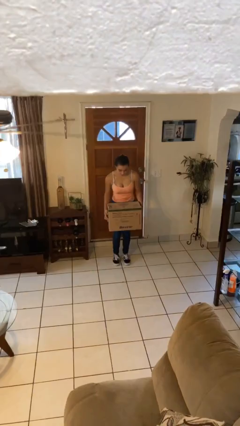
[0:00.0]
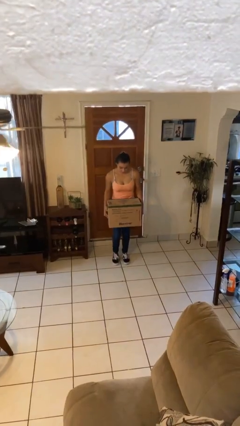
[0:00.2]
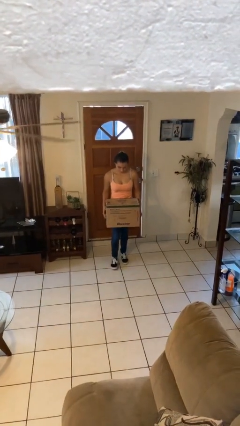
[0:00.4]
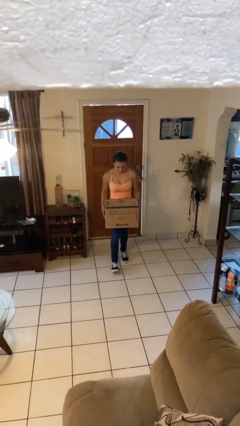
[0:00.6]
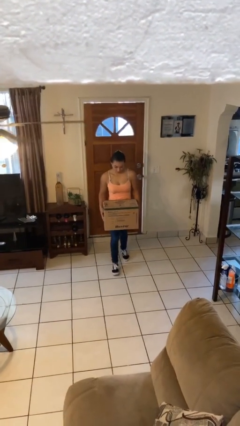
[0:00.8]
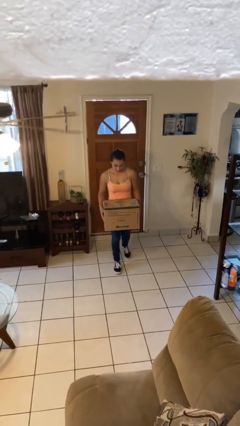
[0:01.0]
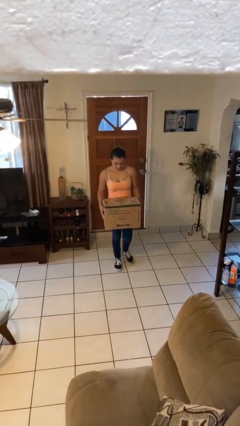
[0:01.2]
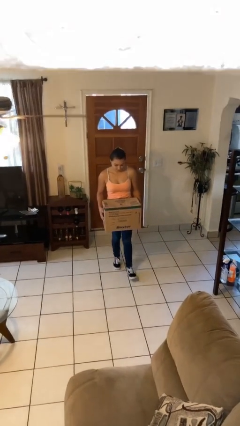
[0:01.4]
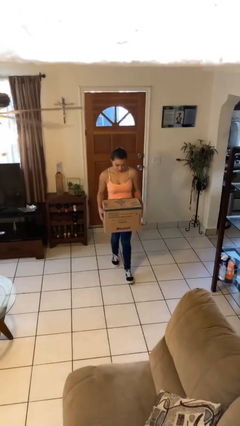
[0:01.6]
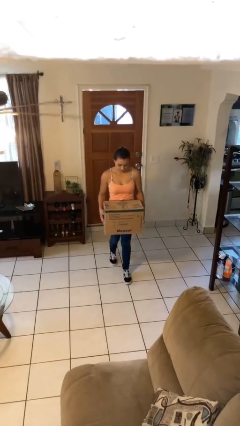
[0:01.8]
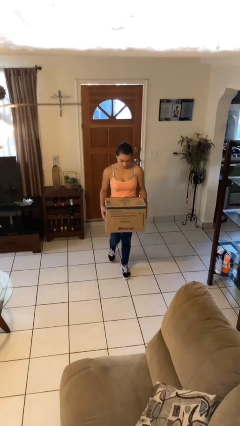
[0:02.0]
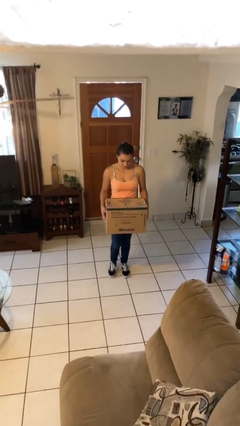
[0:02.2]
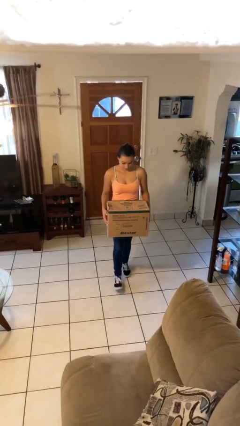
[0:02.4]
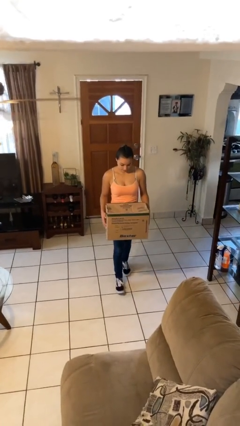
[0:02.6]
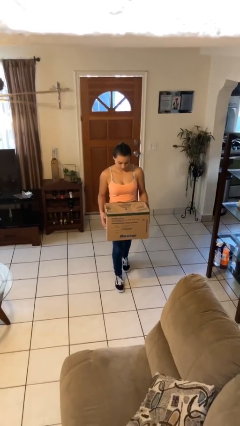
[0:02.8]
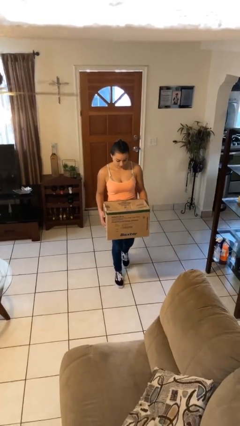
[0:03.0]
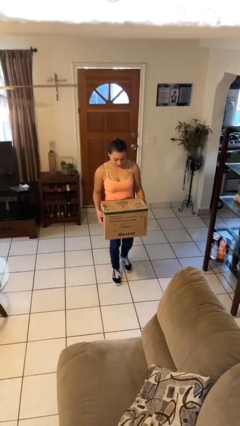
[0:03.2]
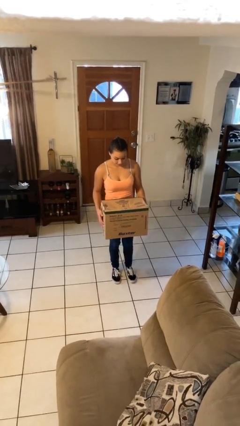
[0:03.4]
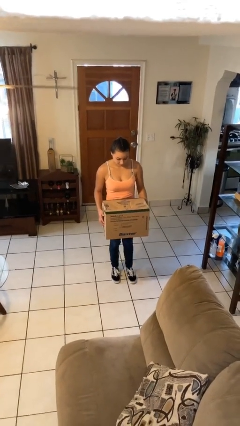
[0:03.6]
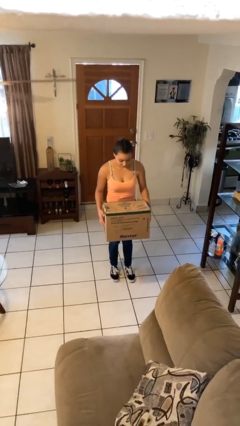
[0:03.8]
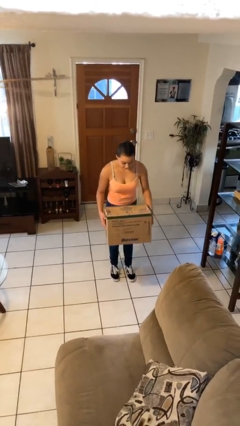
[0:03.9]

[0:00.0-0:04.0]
person carries heavy object

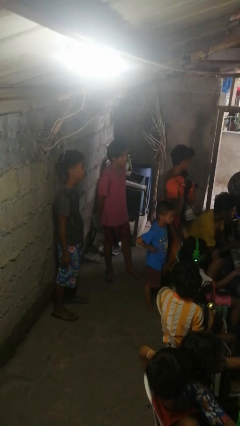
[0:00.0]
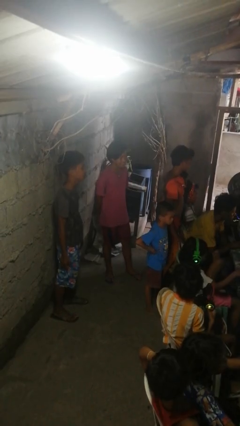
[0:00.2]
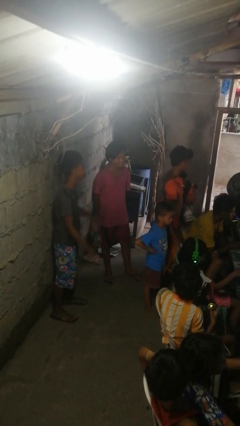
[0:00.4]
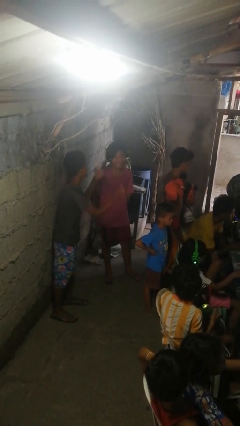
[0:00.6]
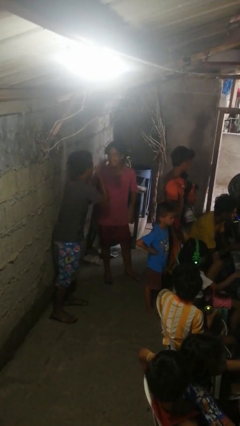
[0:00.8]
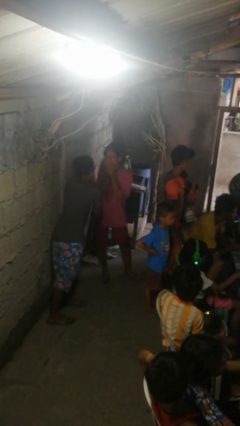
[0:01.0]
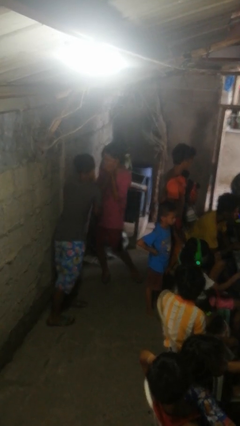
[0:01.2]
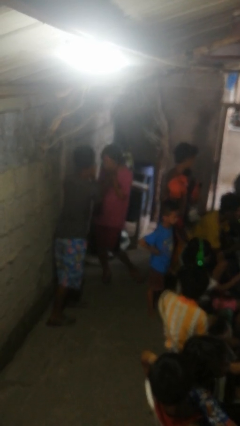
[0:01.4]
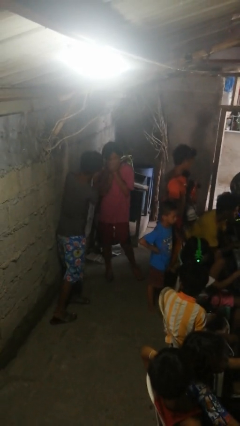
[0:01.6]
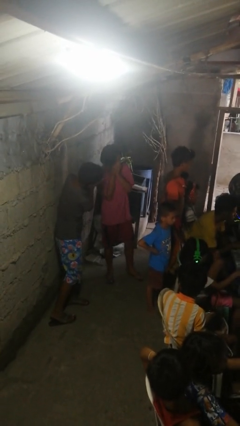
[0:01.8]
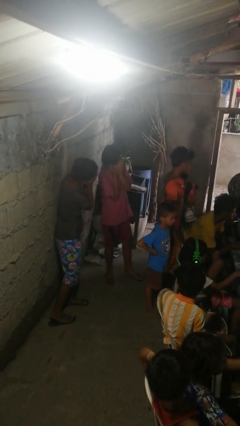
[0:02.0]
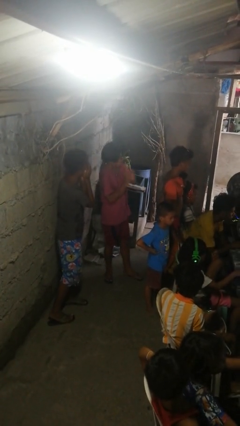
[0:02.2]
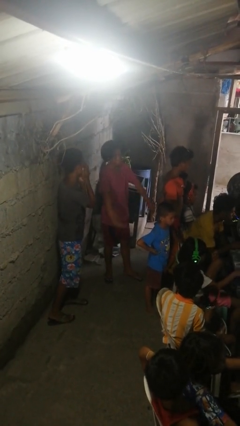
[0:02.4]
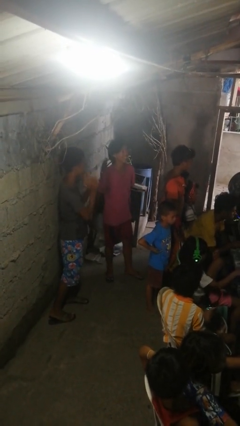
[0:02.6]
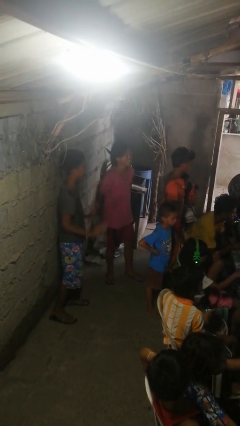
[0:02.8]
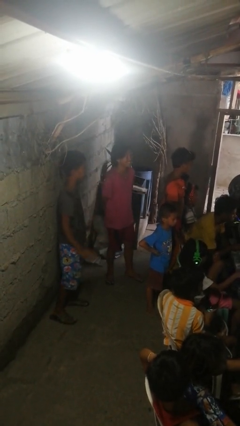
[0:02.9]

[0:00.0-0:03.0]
person laughs with person

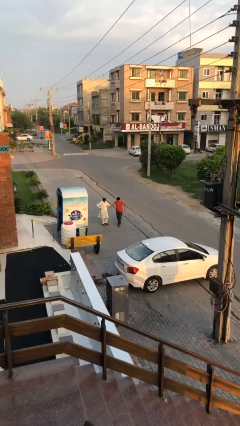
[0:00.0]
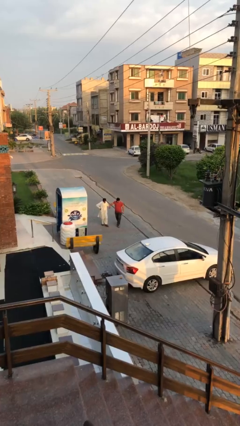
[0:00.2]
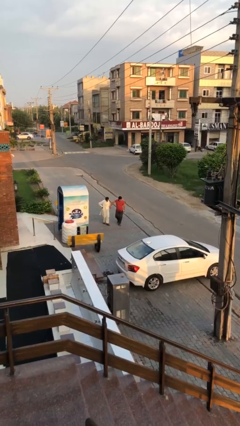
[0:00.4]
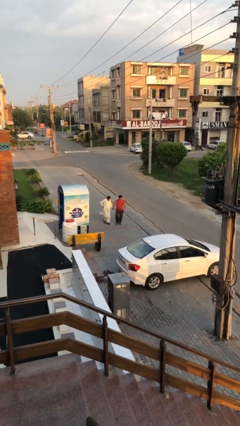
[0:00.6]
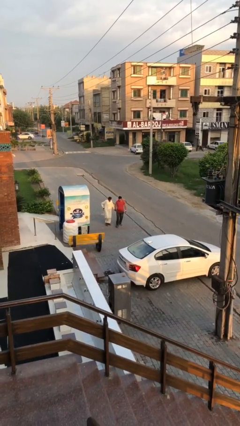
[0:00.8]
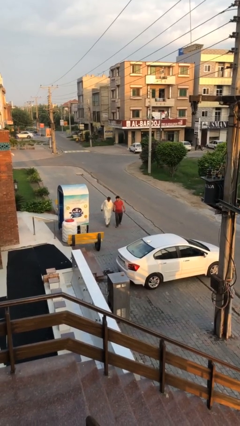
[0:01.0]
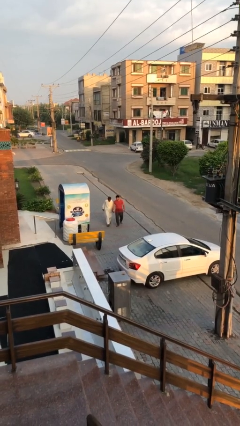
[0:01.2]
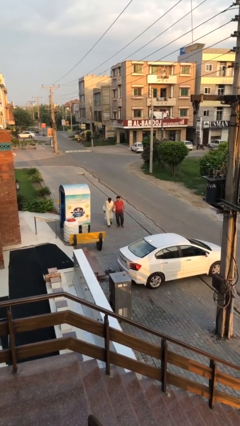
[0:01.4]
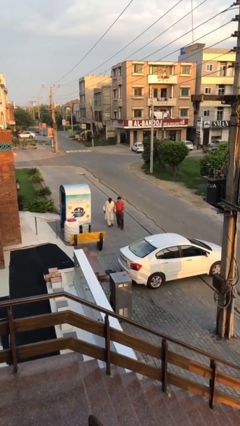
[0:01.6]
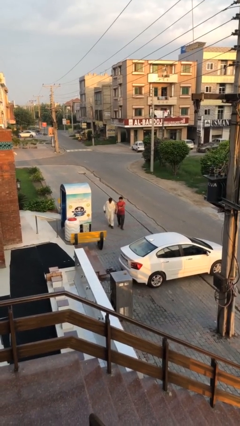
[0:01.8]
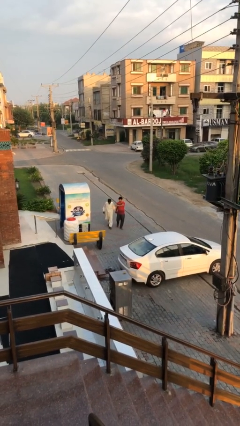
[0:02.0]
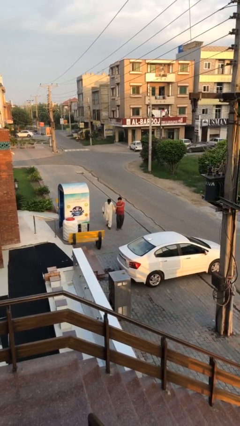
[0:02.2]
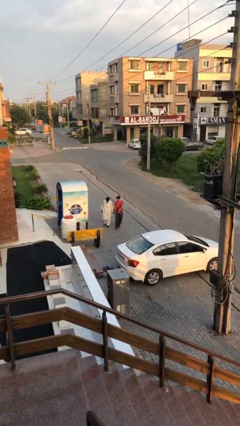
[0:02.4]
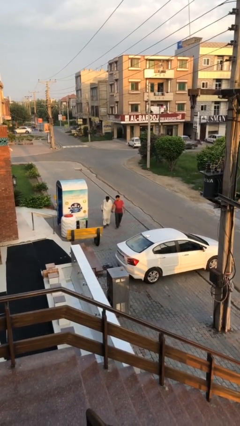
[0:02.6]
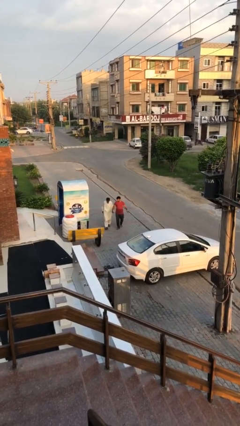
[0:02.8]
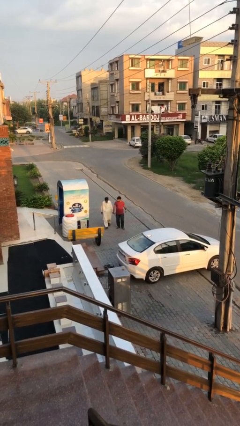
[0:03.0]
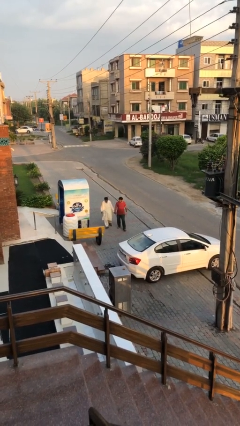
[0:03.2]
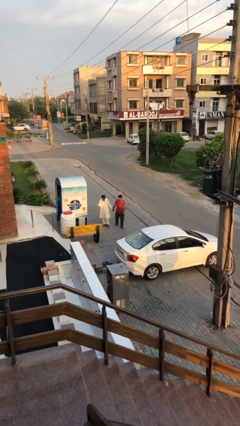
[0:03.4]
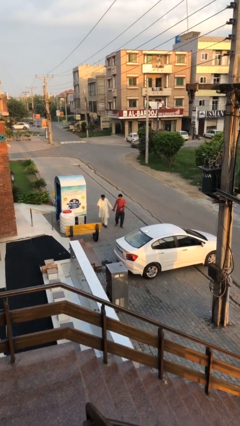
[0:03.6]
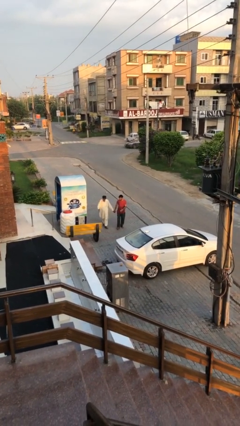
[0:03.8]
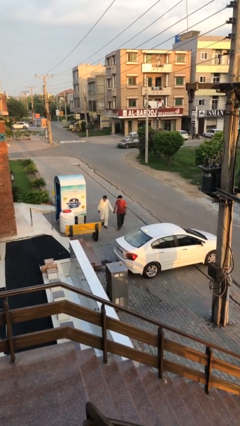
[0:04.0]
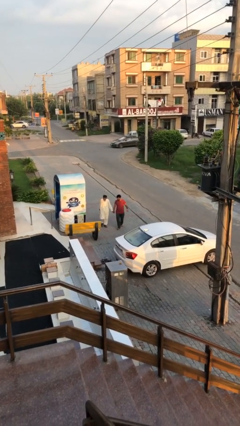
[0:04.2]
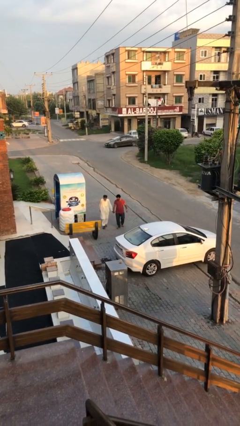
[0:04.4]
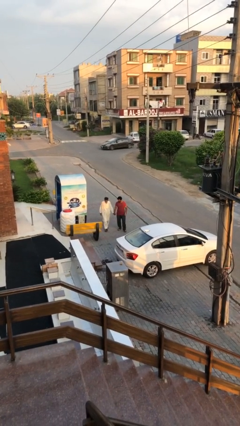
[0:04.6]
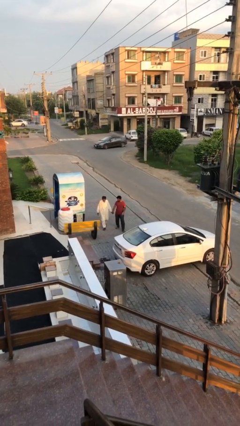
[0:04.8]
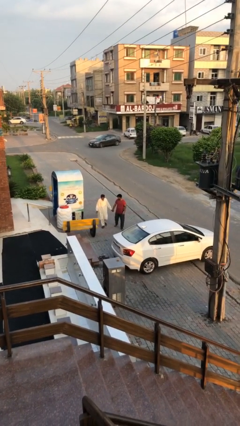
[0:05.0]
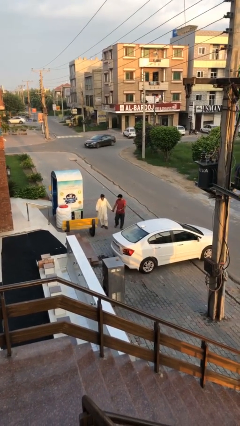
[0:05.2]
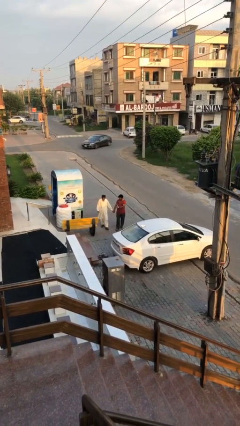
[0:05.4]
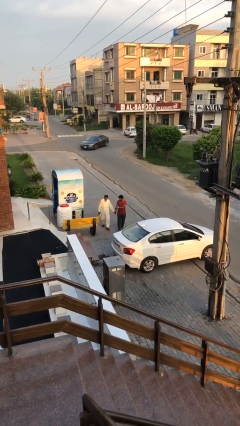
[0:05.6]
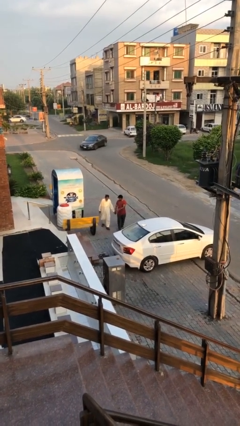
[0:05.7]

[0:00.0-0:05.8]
person holds hand

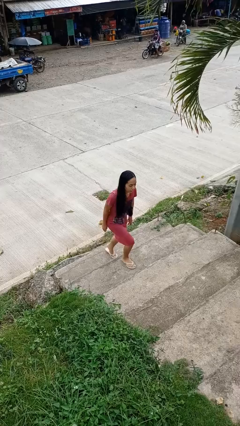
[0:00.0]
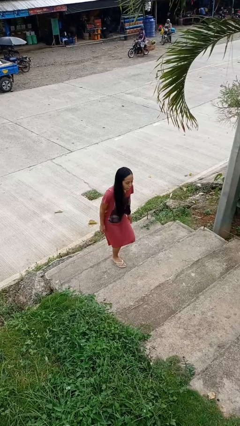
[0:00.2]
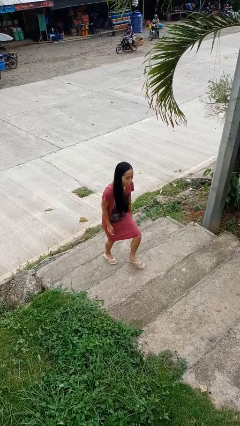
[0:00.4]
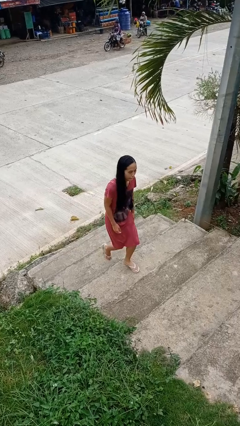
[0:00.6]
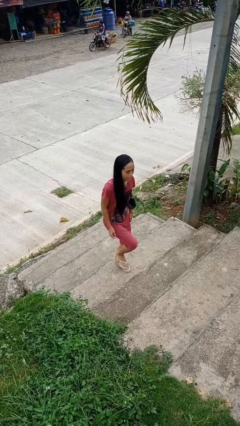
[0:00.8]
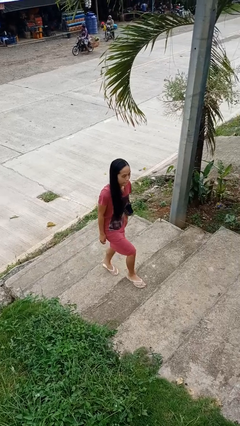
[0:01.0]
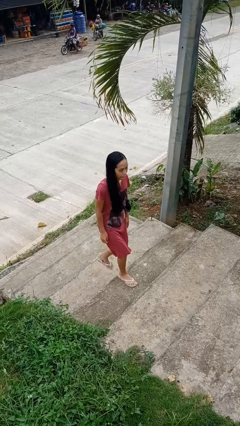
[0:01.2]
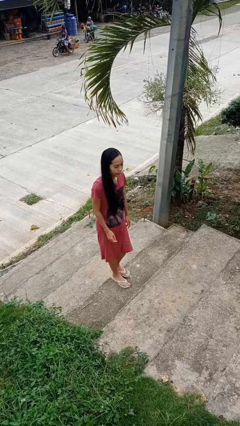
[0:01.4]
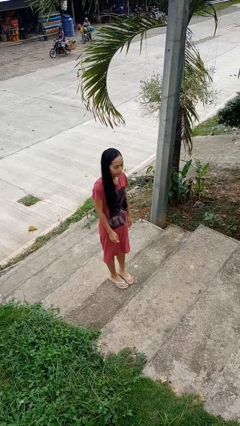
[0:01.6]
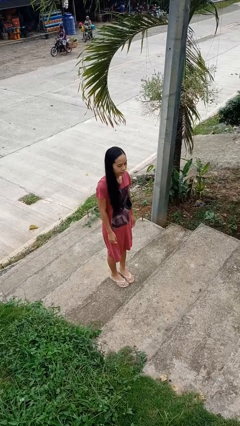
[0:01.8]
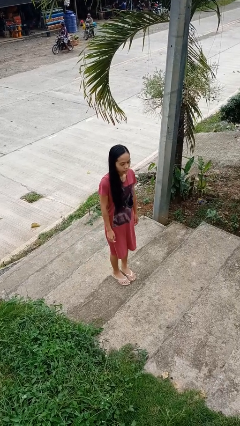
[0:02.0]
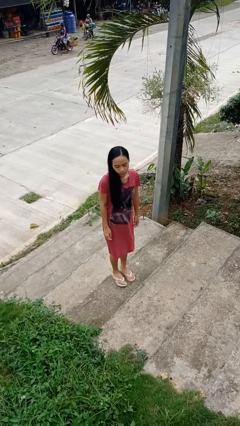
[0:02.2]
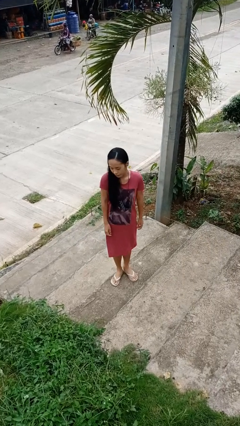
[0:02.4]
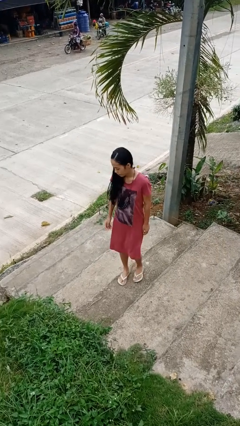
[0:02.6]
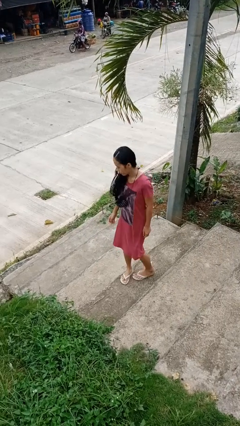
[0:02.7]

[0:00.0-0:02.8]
person climbs up stairs

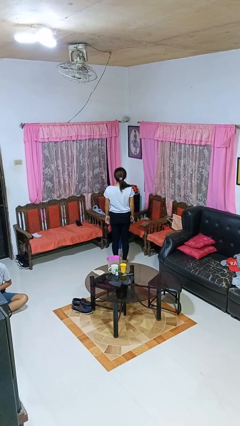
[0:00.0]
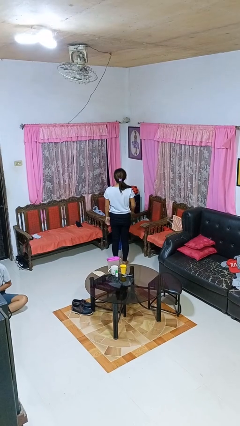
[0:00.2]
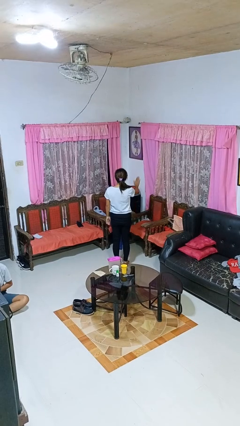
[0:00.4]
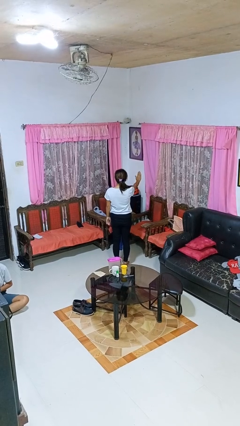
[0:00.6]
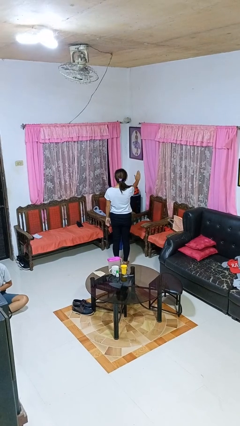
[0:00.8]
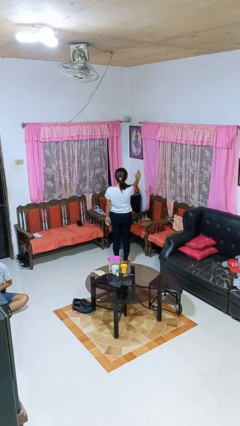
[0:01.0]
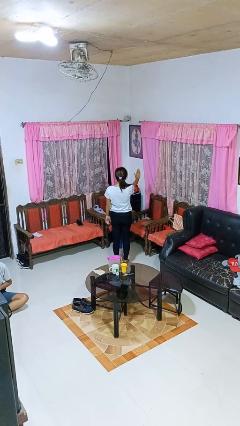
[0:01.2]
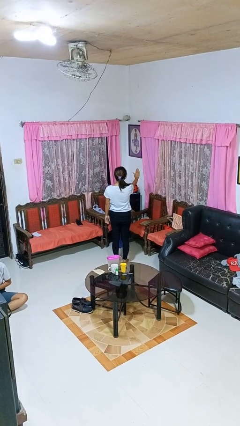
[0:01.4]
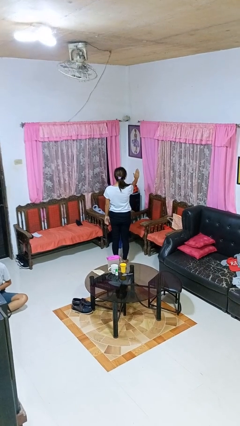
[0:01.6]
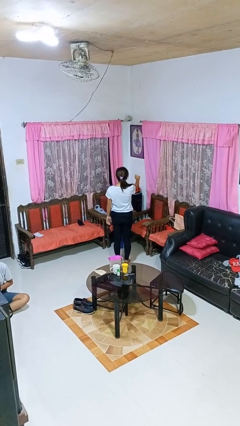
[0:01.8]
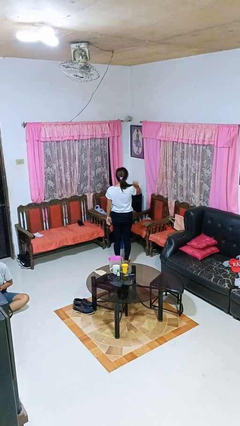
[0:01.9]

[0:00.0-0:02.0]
person gestures stop
